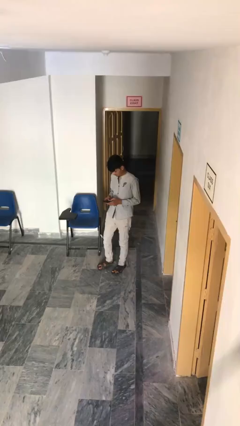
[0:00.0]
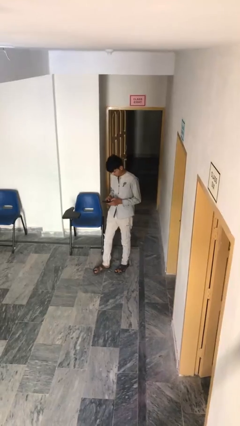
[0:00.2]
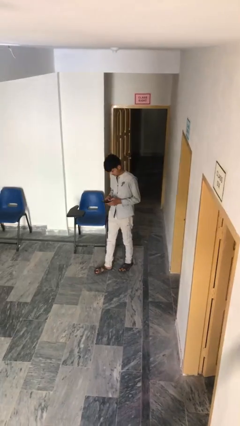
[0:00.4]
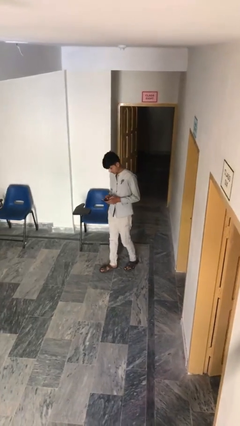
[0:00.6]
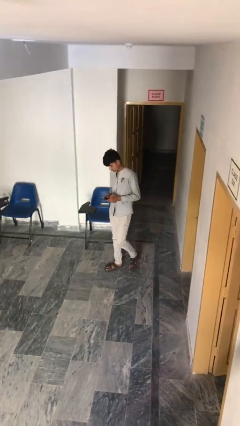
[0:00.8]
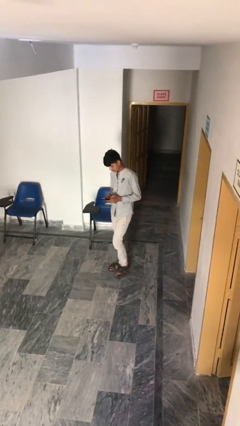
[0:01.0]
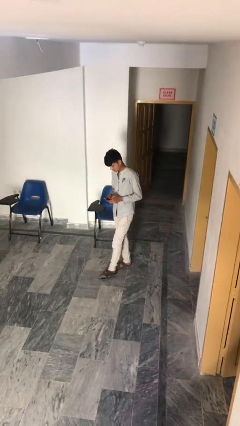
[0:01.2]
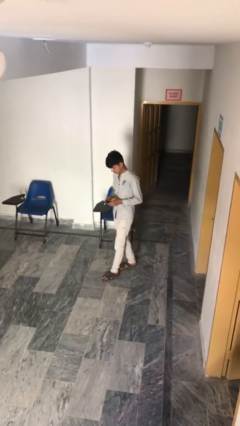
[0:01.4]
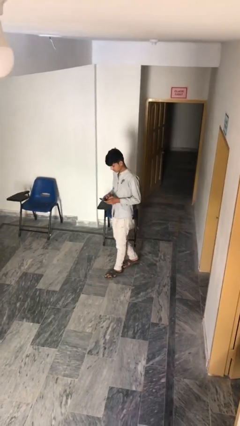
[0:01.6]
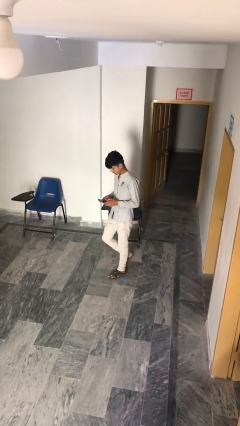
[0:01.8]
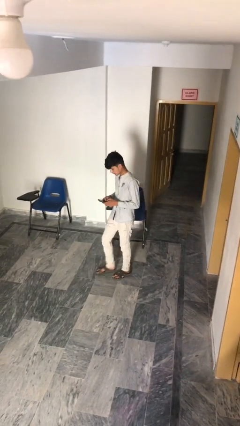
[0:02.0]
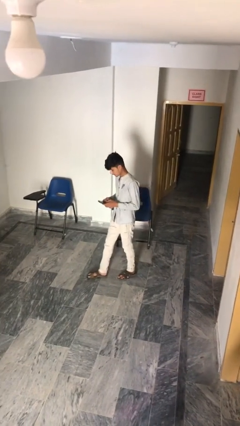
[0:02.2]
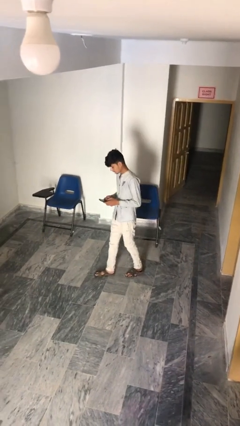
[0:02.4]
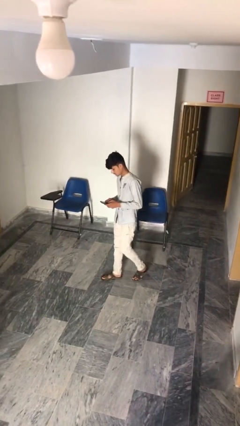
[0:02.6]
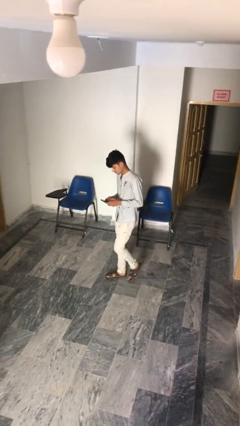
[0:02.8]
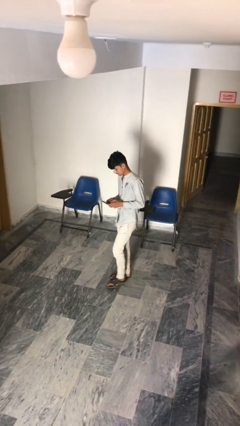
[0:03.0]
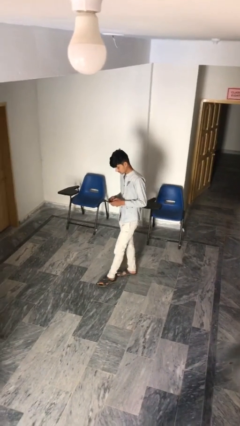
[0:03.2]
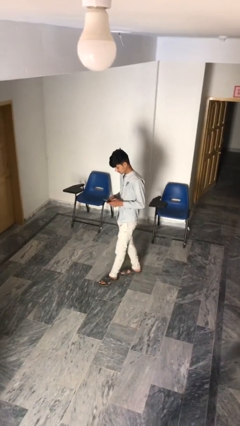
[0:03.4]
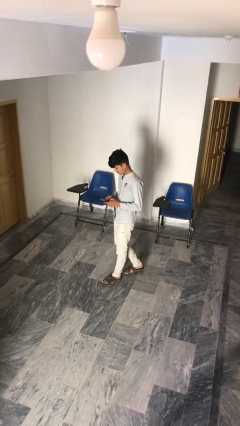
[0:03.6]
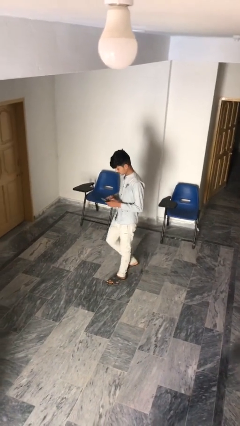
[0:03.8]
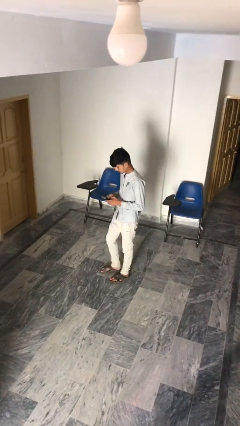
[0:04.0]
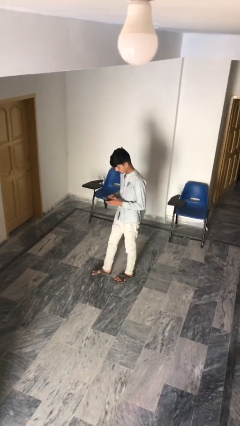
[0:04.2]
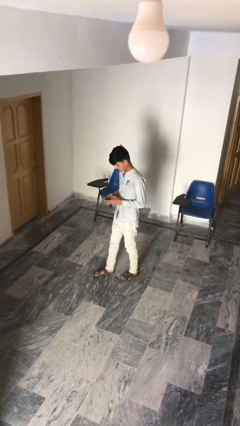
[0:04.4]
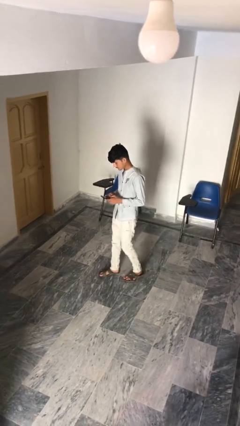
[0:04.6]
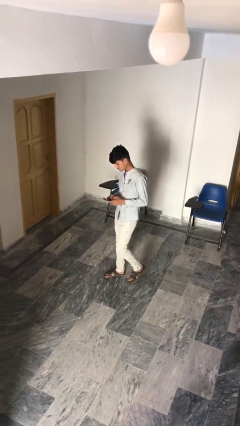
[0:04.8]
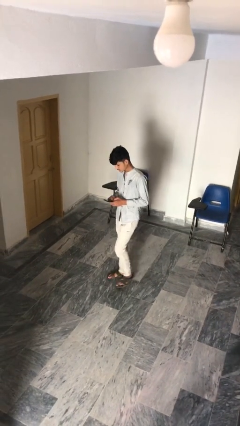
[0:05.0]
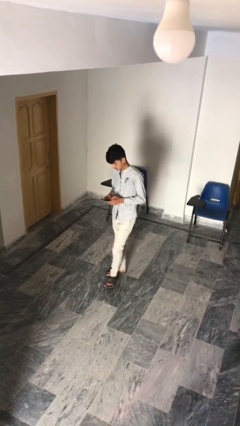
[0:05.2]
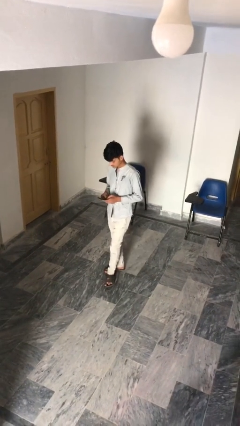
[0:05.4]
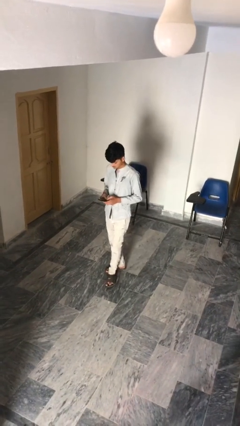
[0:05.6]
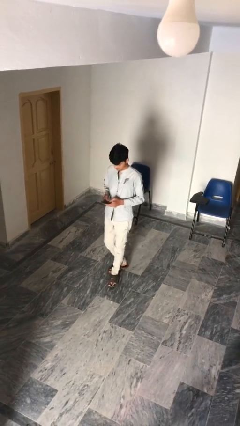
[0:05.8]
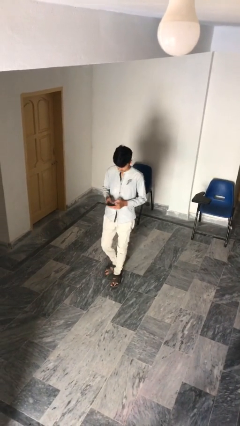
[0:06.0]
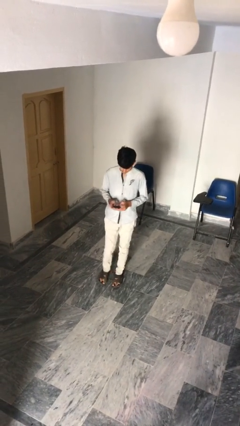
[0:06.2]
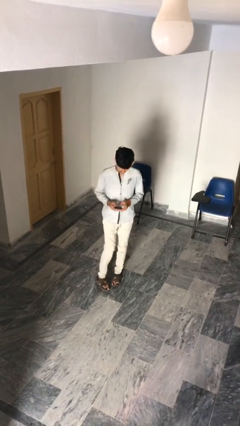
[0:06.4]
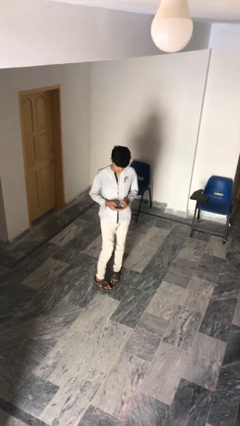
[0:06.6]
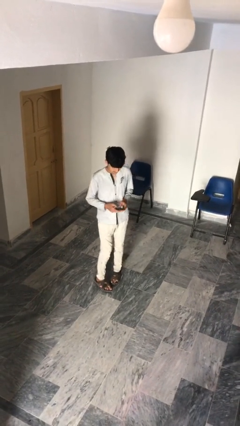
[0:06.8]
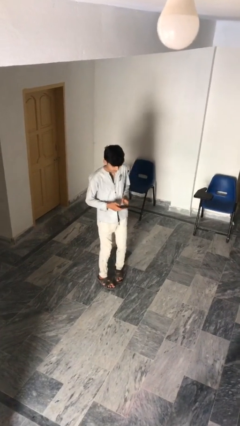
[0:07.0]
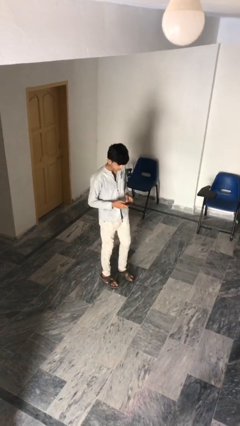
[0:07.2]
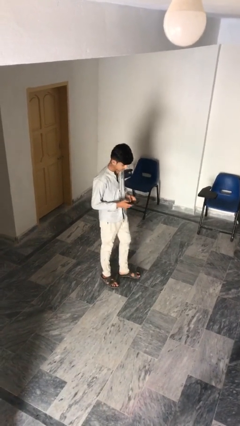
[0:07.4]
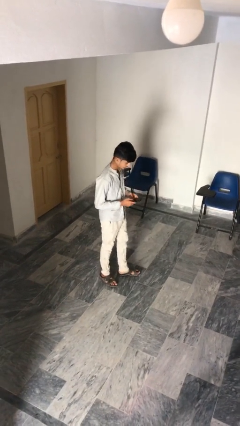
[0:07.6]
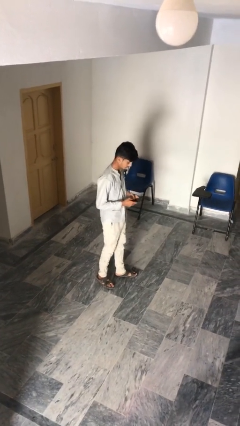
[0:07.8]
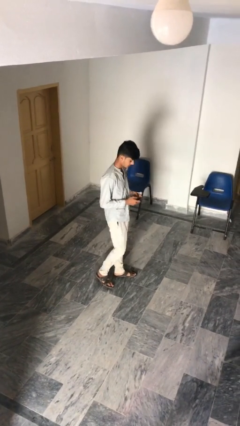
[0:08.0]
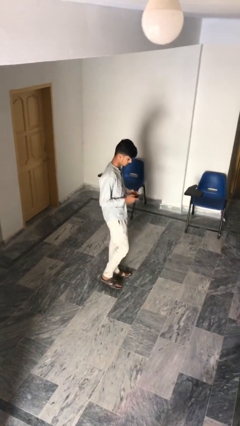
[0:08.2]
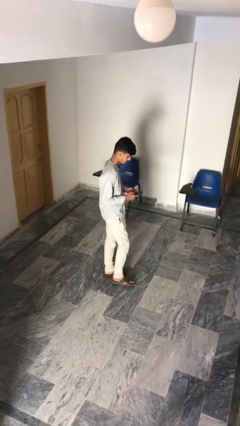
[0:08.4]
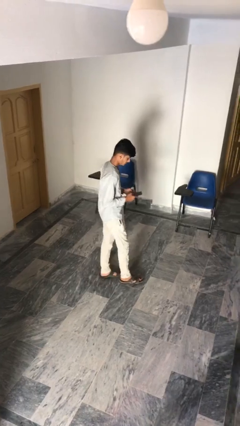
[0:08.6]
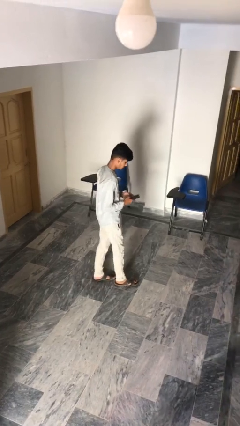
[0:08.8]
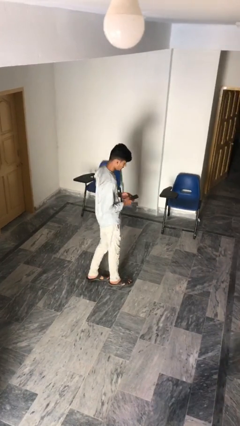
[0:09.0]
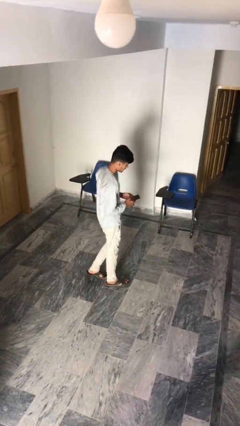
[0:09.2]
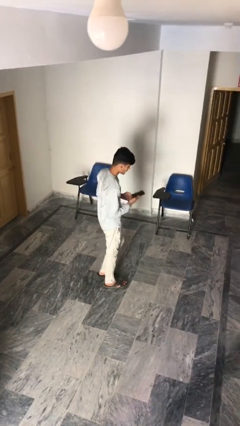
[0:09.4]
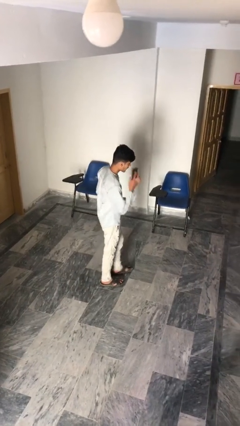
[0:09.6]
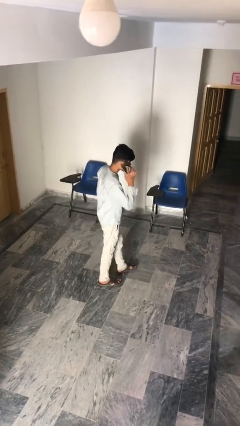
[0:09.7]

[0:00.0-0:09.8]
person texts on phone

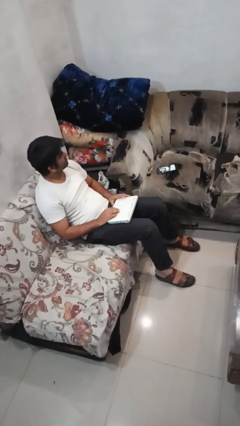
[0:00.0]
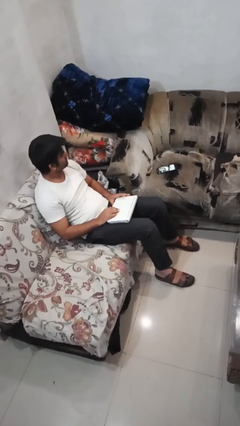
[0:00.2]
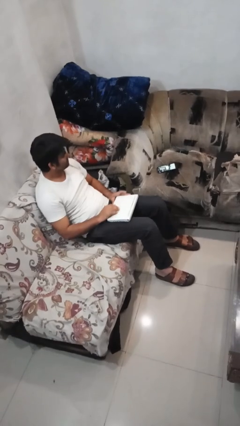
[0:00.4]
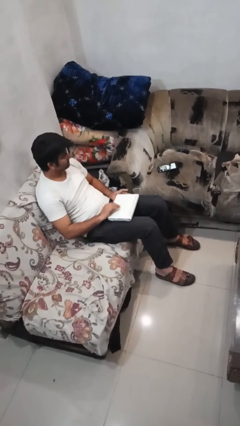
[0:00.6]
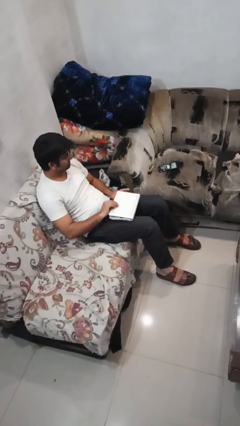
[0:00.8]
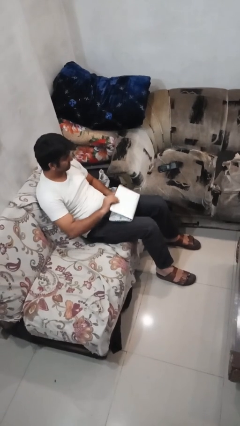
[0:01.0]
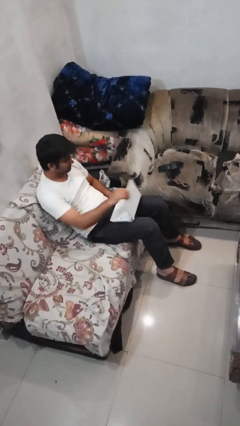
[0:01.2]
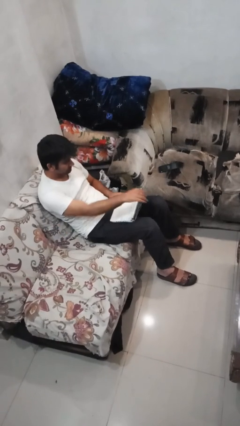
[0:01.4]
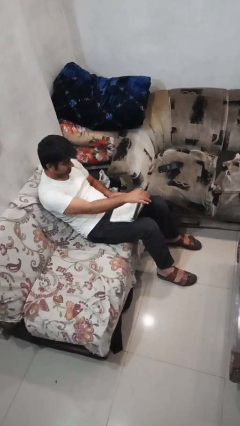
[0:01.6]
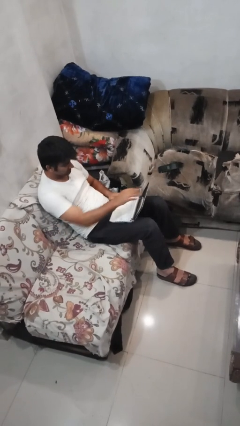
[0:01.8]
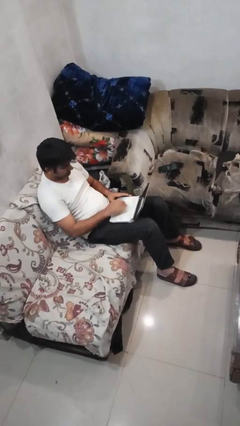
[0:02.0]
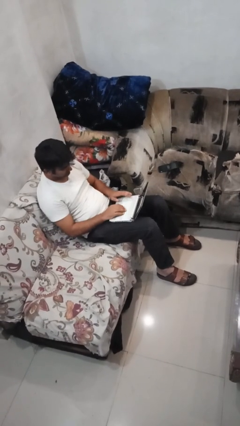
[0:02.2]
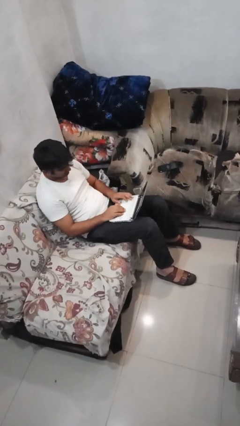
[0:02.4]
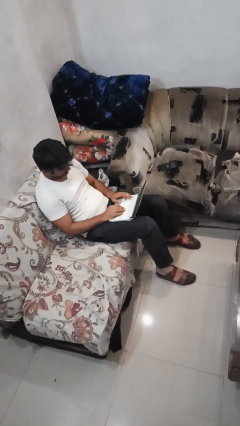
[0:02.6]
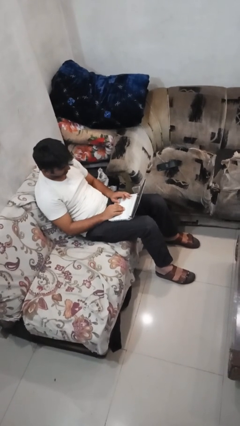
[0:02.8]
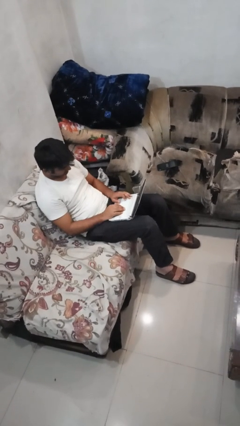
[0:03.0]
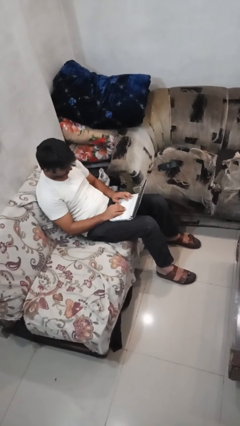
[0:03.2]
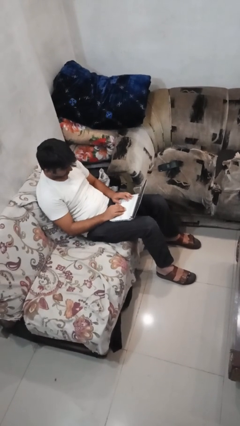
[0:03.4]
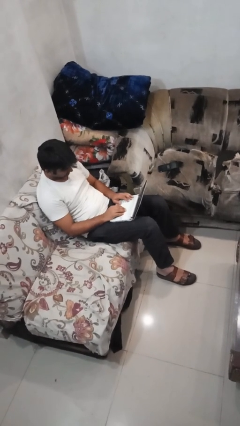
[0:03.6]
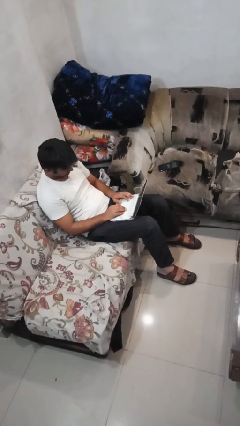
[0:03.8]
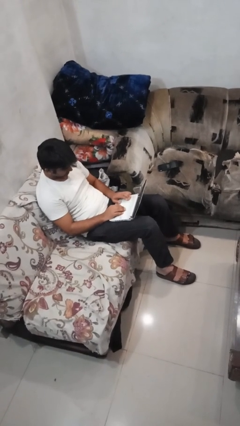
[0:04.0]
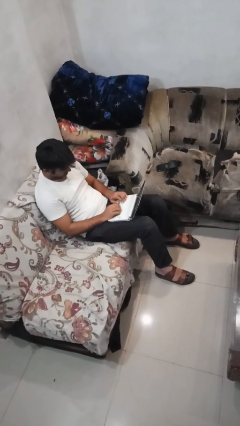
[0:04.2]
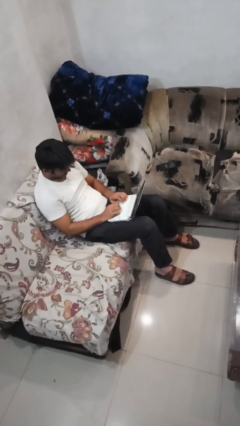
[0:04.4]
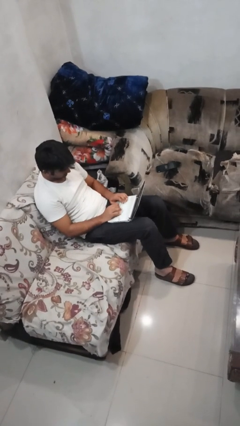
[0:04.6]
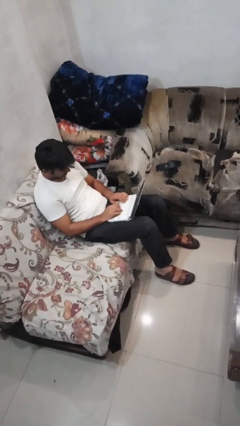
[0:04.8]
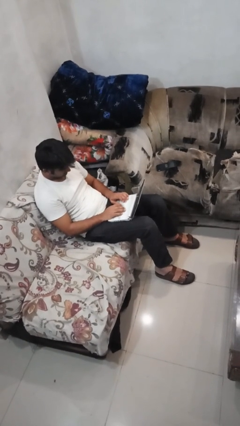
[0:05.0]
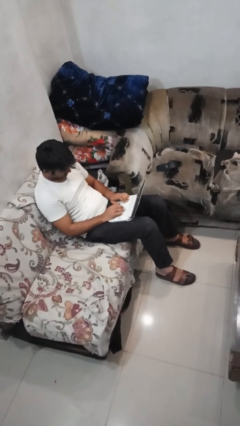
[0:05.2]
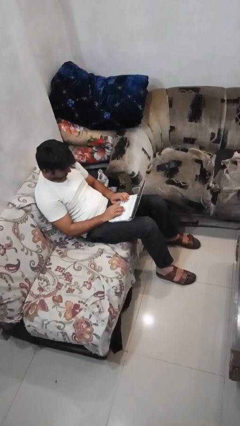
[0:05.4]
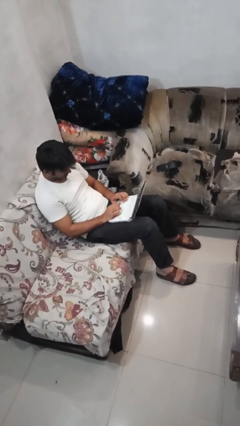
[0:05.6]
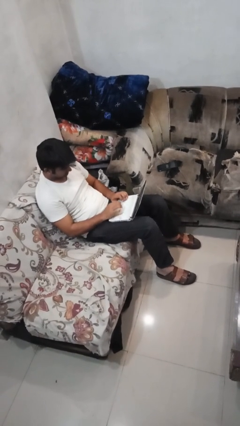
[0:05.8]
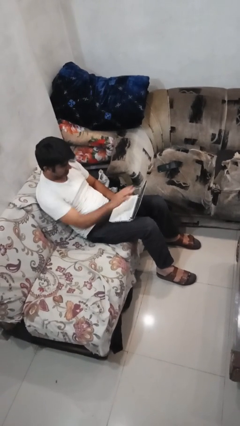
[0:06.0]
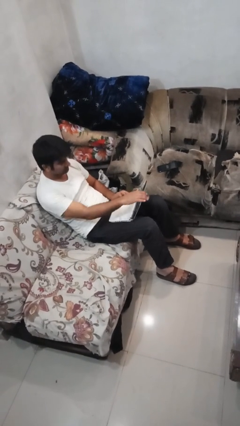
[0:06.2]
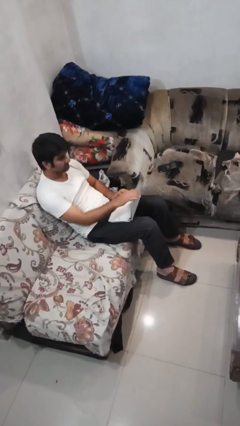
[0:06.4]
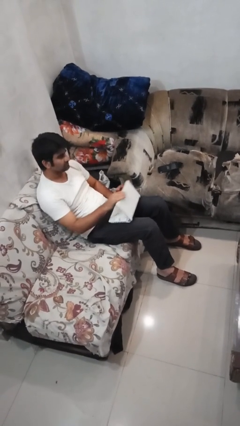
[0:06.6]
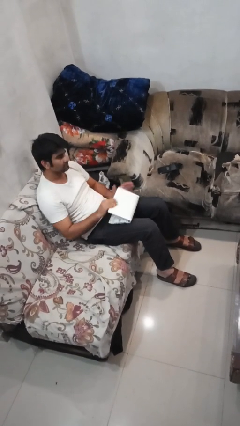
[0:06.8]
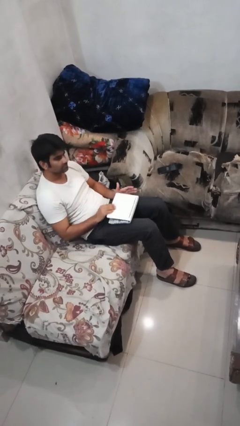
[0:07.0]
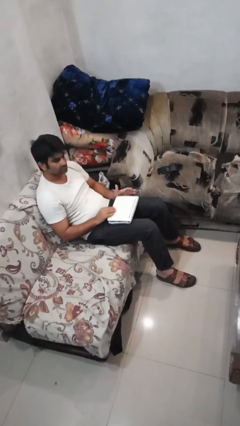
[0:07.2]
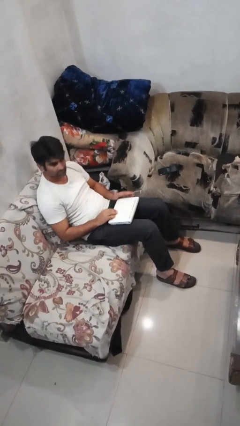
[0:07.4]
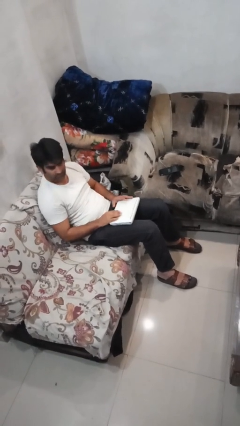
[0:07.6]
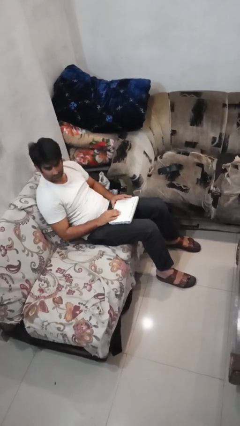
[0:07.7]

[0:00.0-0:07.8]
person interacts with laptop

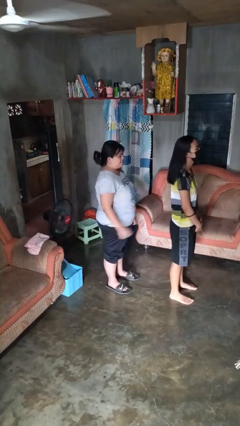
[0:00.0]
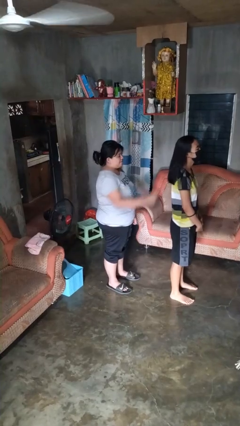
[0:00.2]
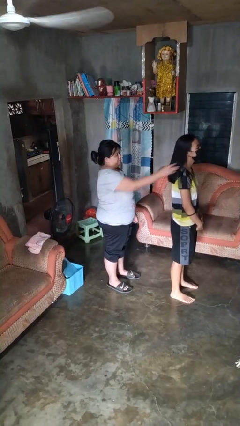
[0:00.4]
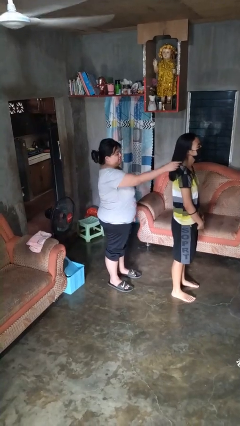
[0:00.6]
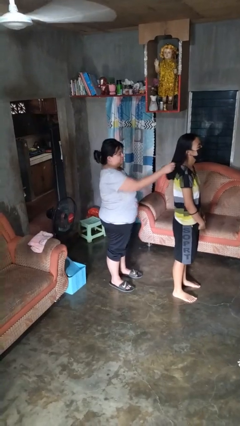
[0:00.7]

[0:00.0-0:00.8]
person grabs person by hair
